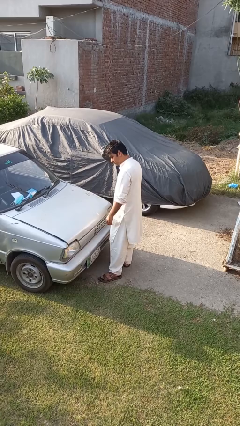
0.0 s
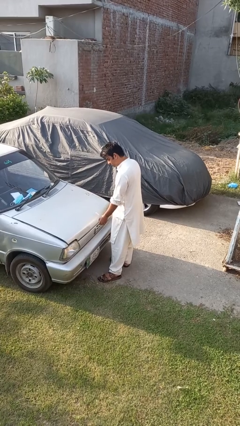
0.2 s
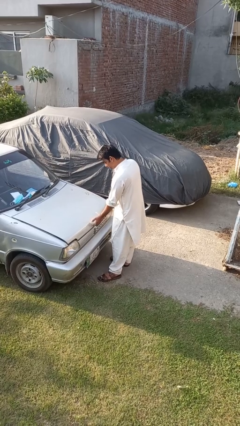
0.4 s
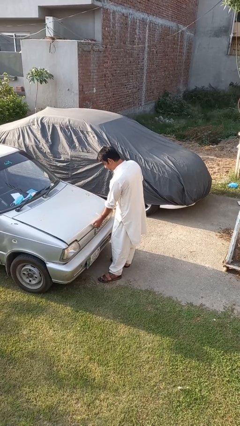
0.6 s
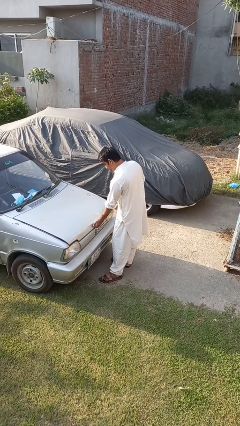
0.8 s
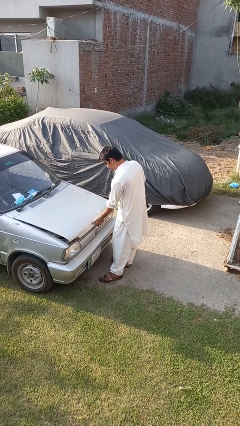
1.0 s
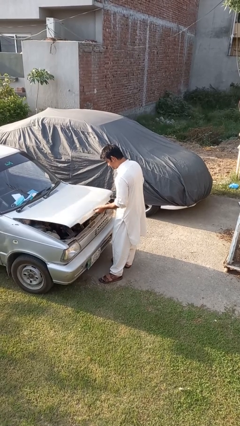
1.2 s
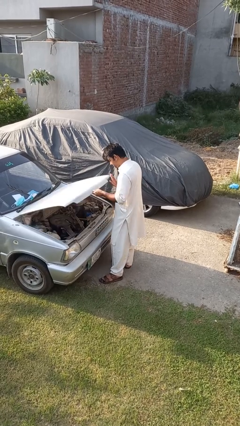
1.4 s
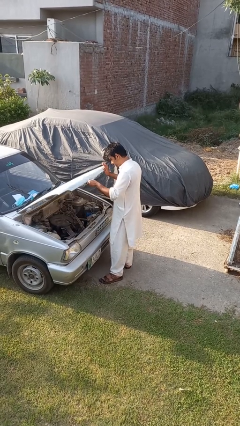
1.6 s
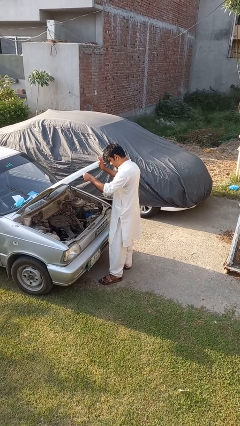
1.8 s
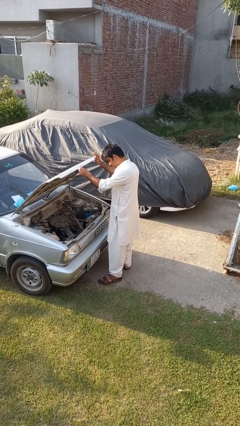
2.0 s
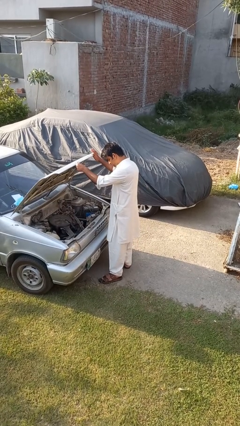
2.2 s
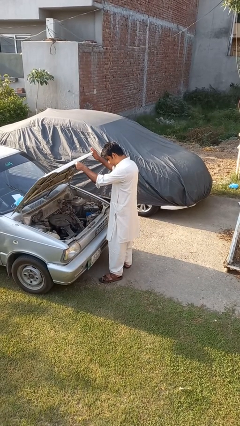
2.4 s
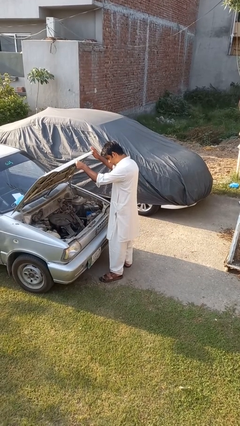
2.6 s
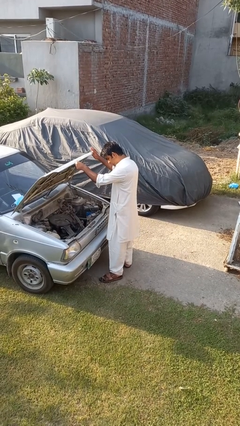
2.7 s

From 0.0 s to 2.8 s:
person opens car hood

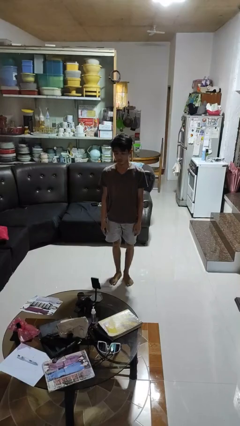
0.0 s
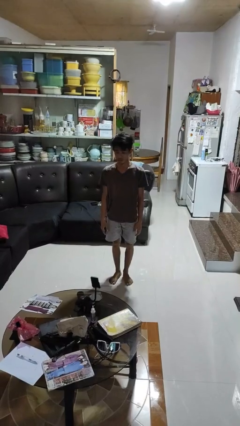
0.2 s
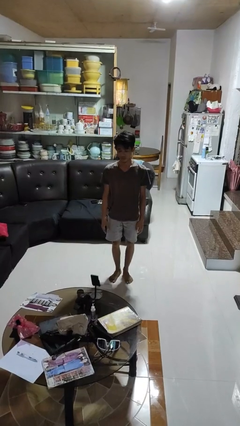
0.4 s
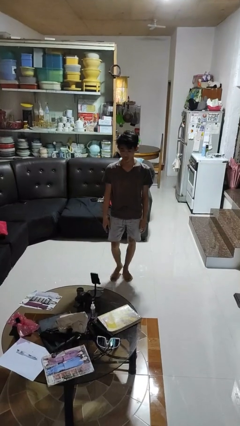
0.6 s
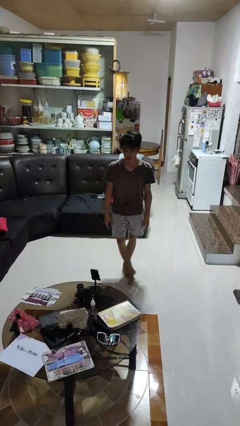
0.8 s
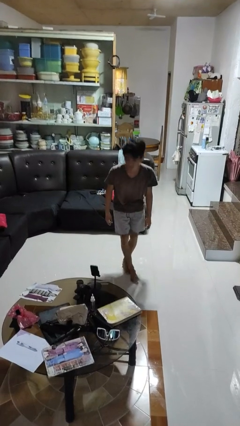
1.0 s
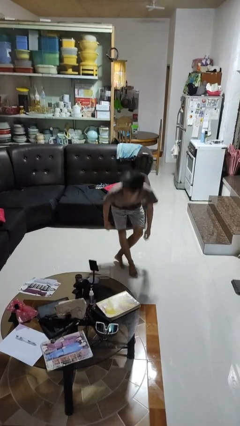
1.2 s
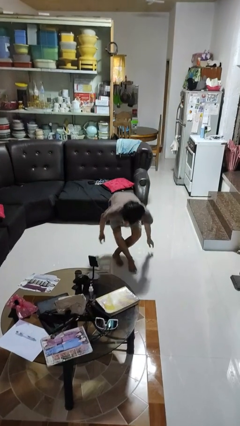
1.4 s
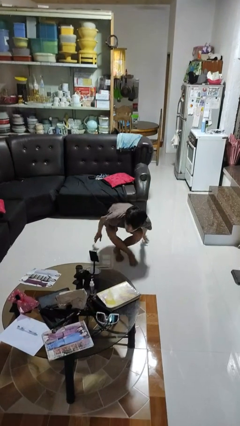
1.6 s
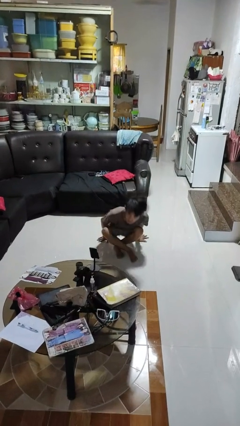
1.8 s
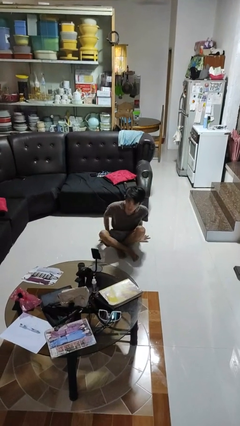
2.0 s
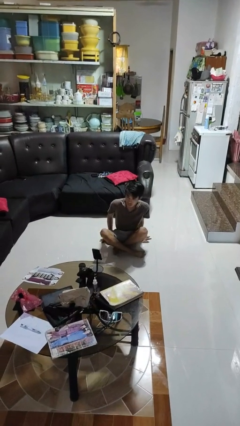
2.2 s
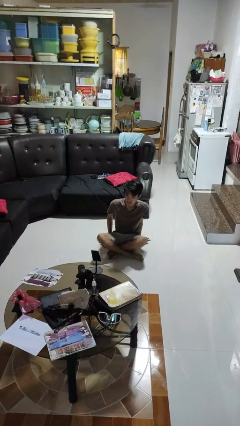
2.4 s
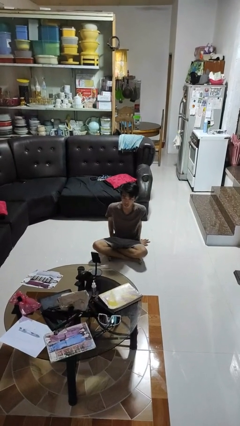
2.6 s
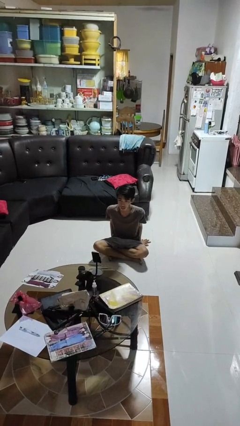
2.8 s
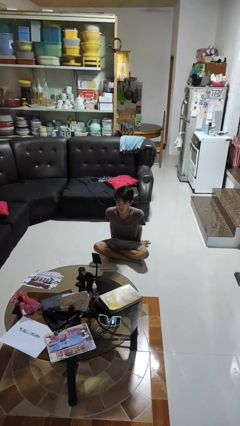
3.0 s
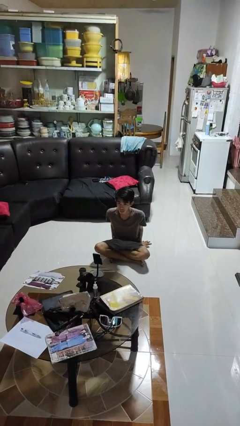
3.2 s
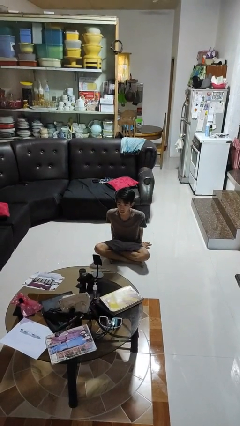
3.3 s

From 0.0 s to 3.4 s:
person sits crisscross

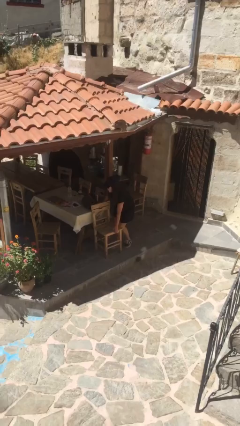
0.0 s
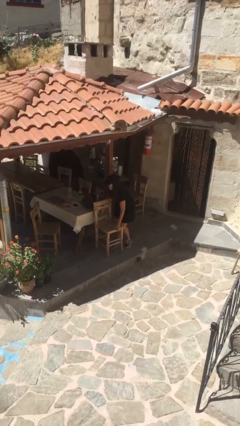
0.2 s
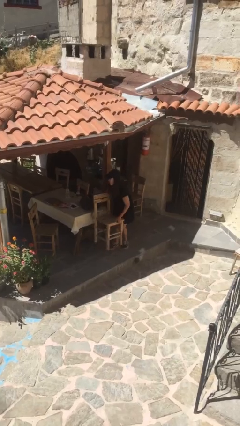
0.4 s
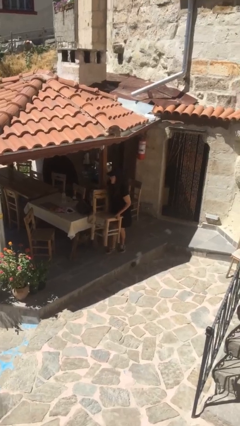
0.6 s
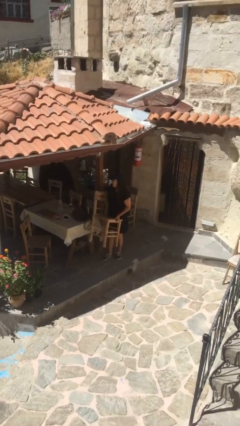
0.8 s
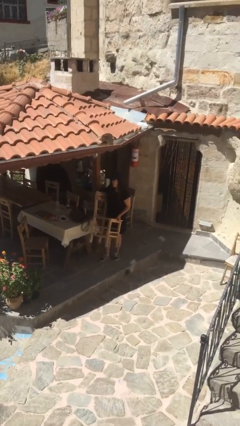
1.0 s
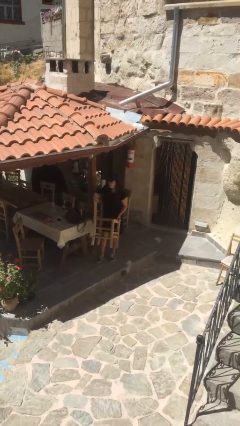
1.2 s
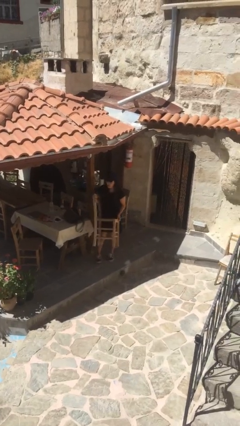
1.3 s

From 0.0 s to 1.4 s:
person picks up object from floor

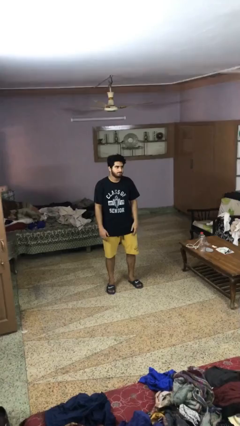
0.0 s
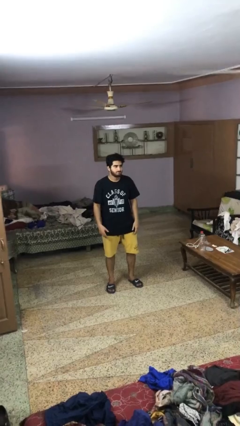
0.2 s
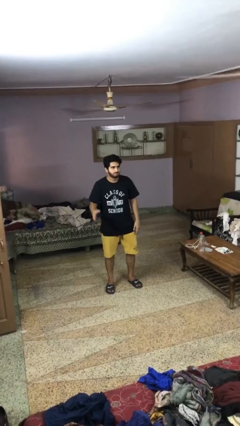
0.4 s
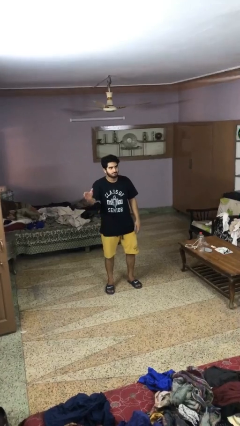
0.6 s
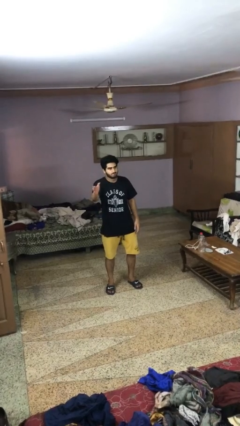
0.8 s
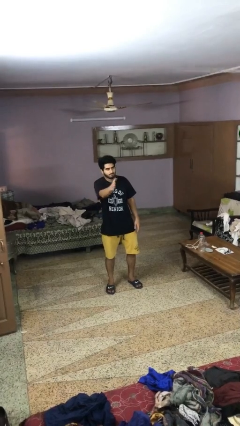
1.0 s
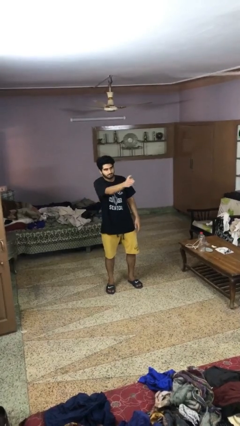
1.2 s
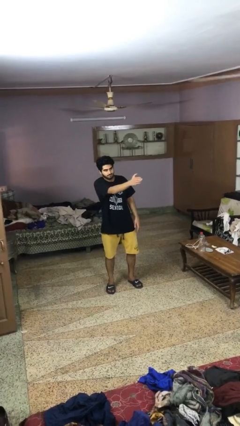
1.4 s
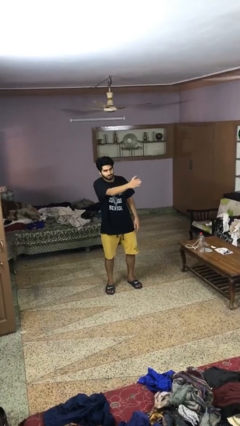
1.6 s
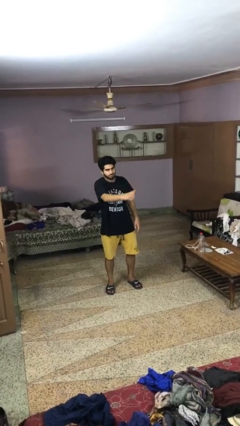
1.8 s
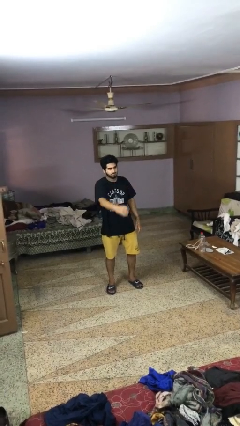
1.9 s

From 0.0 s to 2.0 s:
person gestures swipe left

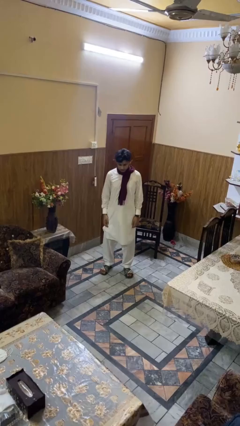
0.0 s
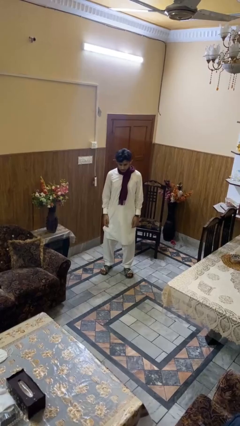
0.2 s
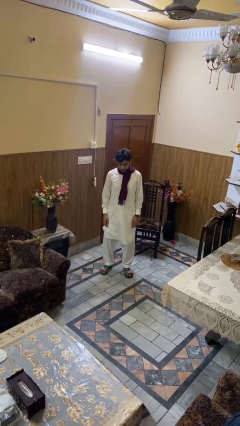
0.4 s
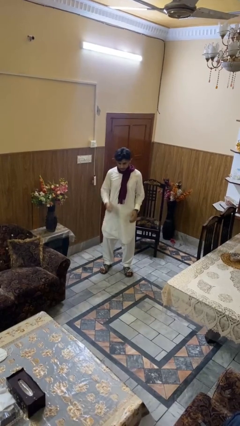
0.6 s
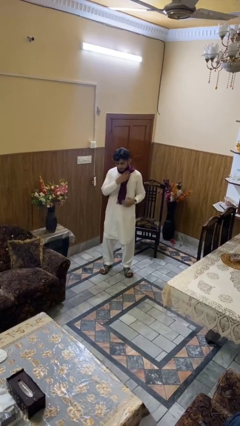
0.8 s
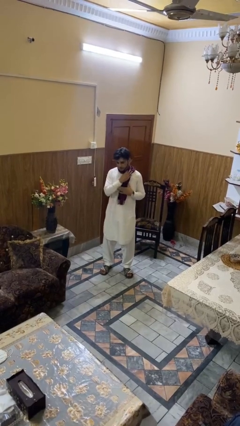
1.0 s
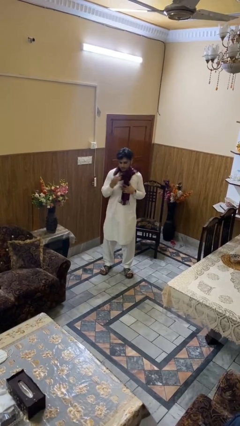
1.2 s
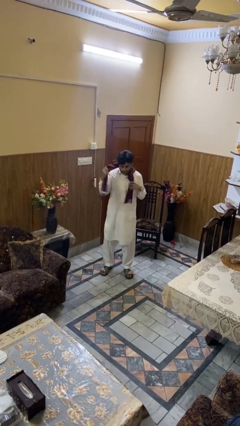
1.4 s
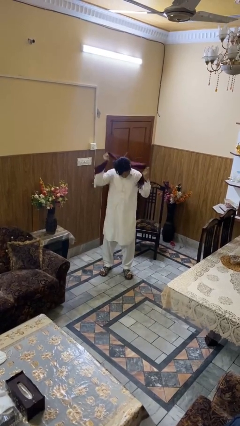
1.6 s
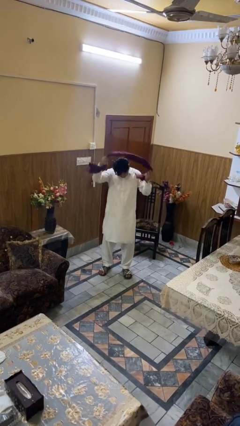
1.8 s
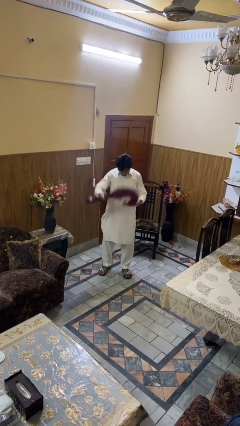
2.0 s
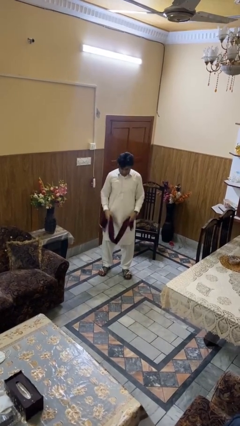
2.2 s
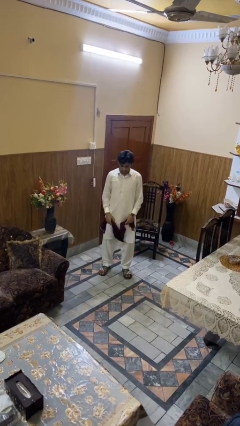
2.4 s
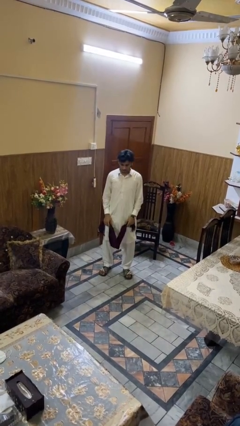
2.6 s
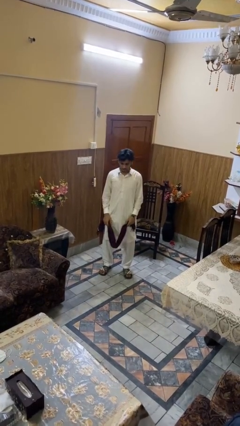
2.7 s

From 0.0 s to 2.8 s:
person takes off scarf

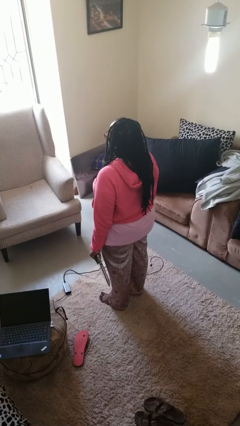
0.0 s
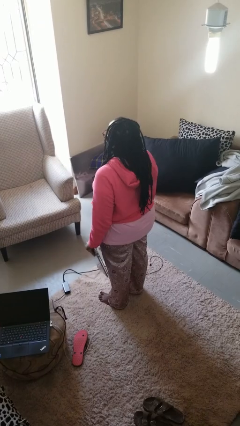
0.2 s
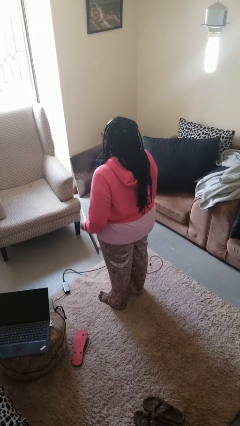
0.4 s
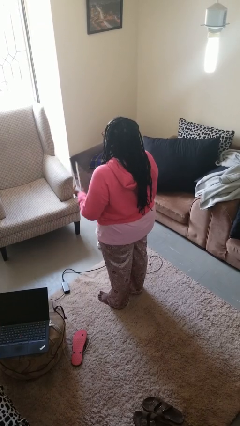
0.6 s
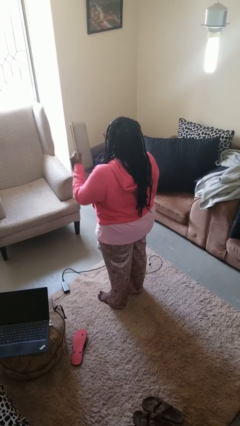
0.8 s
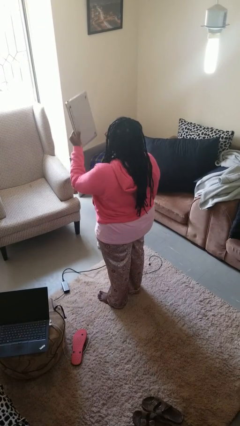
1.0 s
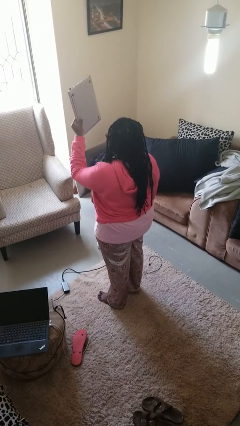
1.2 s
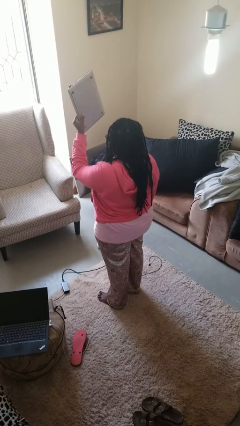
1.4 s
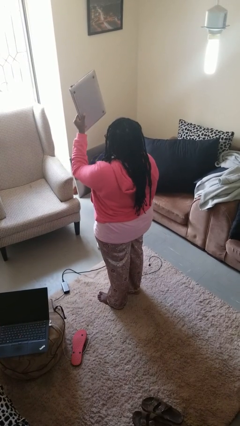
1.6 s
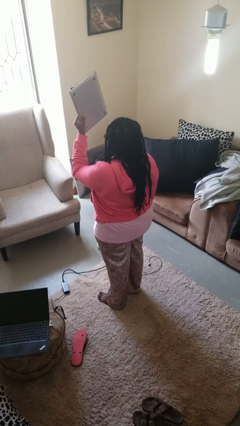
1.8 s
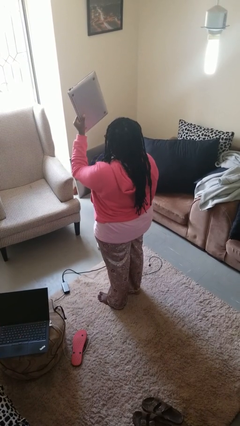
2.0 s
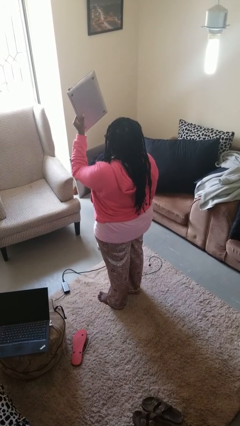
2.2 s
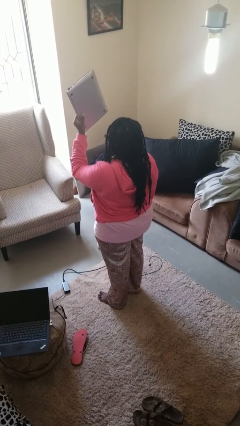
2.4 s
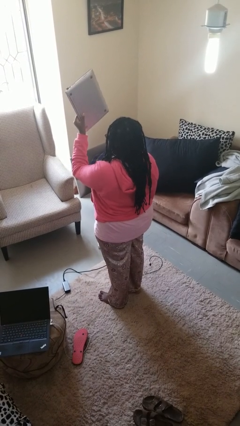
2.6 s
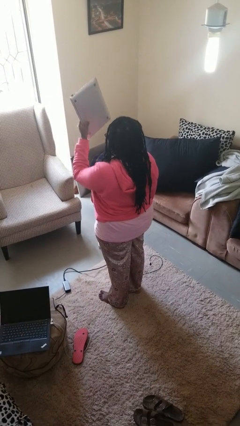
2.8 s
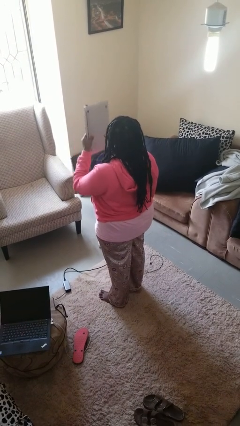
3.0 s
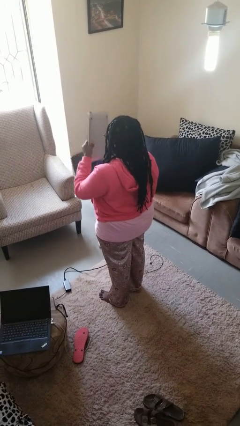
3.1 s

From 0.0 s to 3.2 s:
person holds object above head

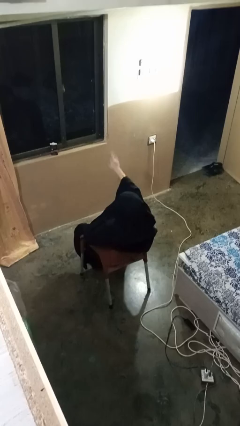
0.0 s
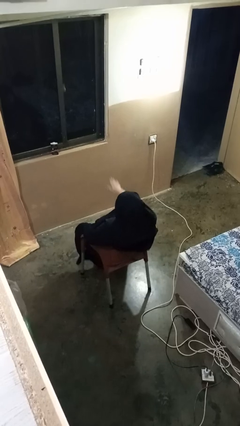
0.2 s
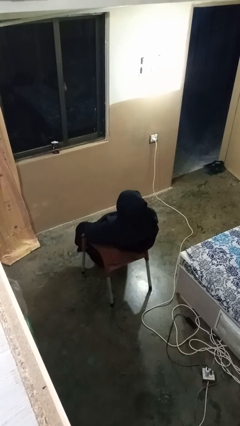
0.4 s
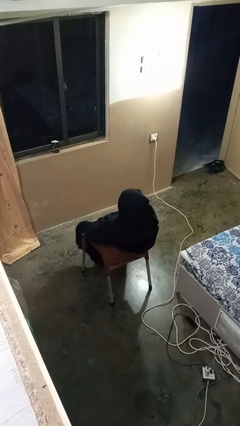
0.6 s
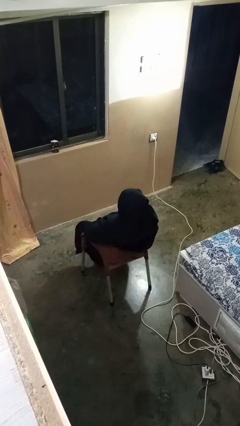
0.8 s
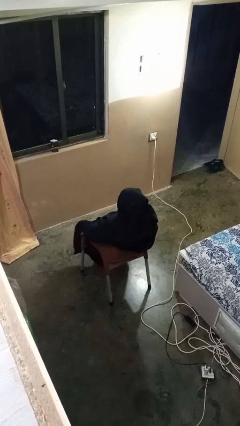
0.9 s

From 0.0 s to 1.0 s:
person gestures swipe down

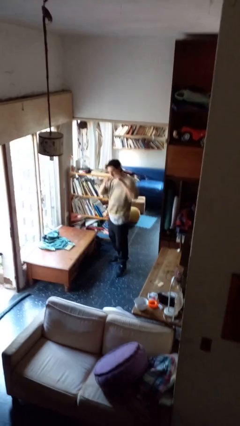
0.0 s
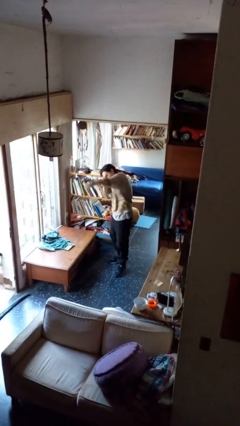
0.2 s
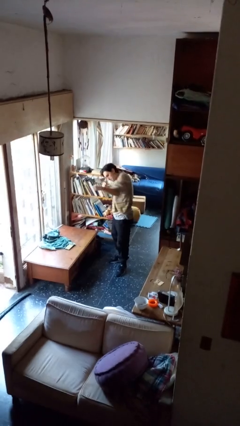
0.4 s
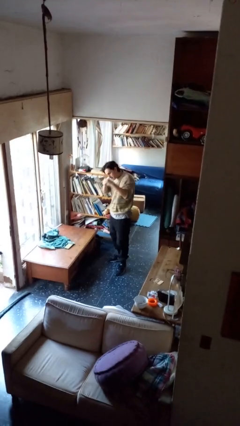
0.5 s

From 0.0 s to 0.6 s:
person punches
